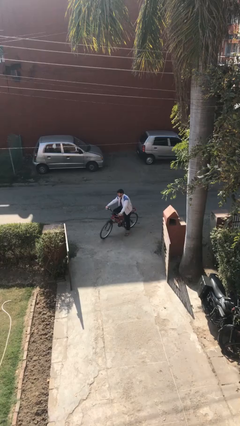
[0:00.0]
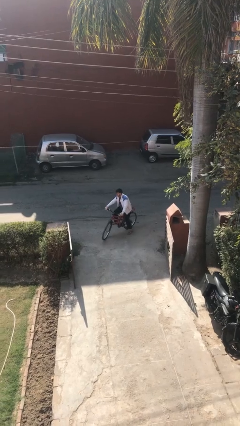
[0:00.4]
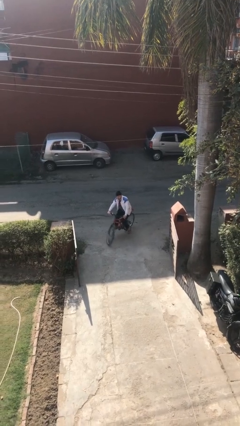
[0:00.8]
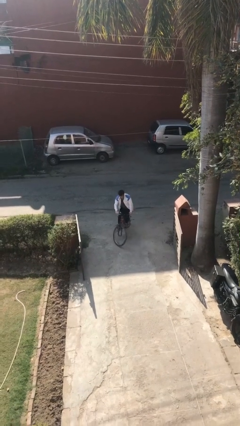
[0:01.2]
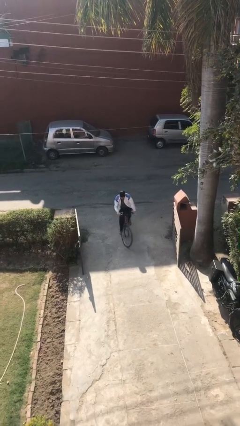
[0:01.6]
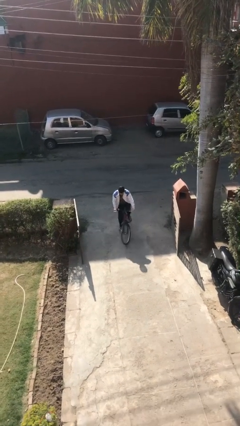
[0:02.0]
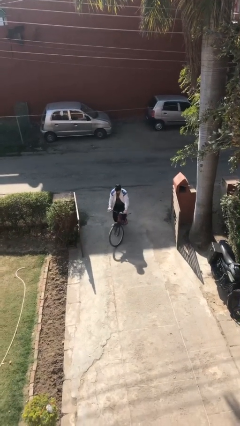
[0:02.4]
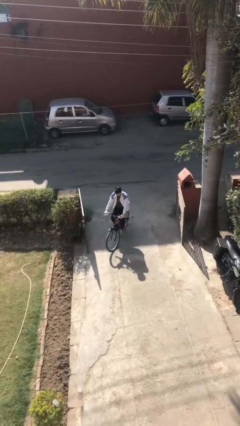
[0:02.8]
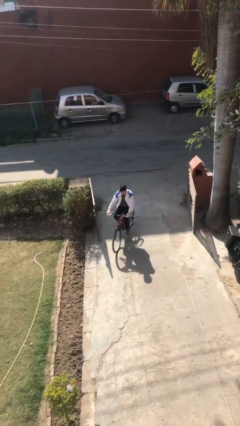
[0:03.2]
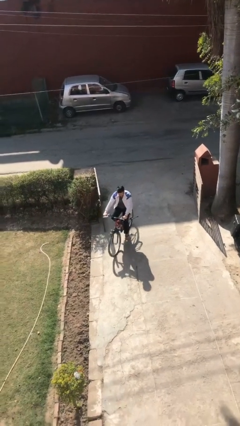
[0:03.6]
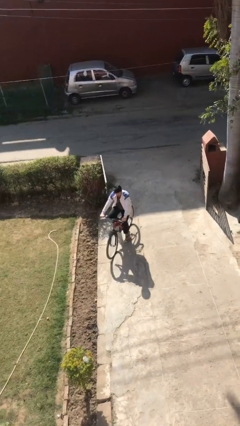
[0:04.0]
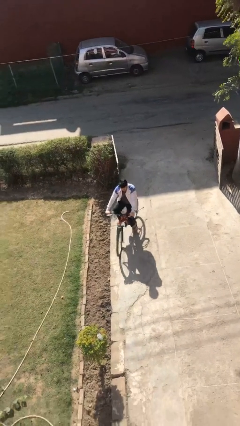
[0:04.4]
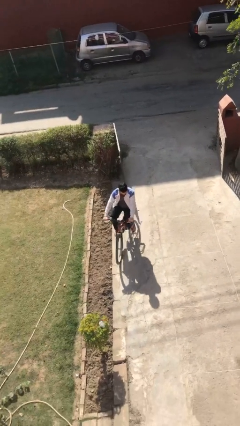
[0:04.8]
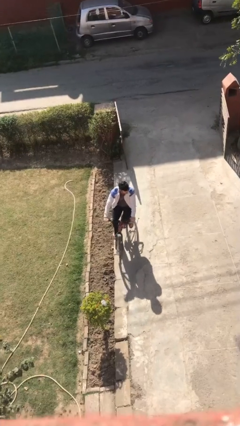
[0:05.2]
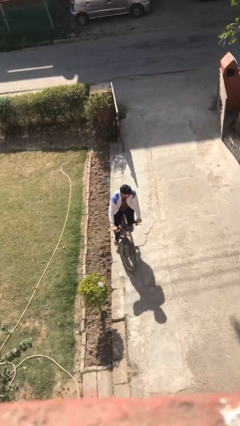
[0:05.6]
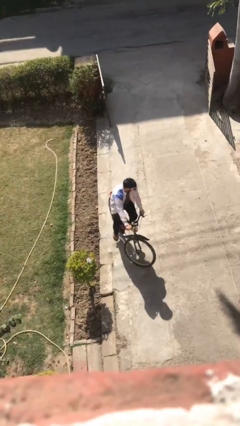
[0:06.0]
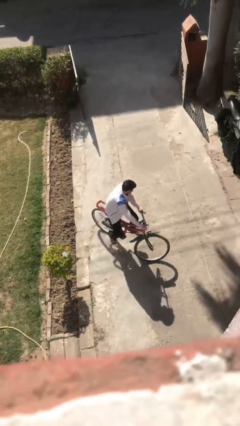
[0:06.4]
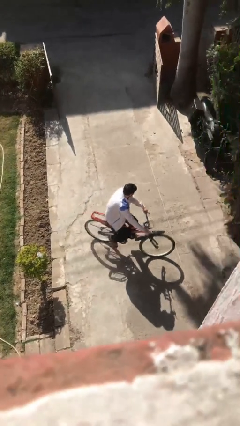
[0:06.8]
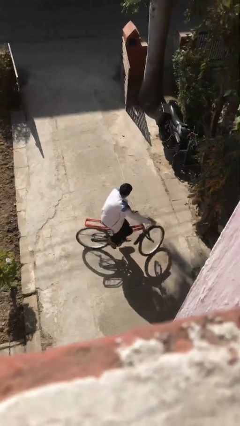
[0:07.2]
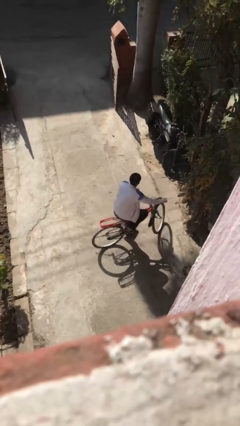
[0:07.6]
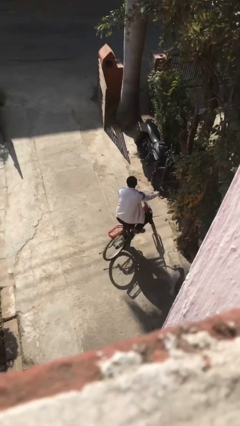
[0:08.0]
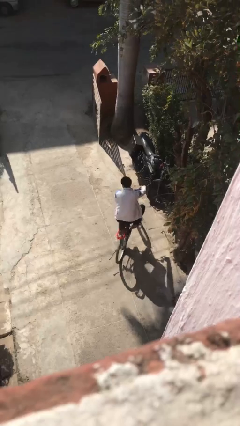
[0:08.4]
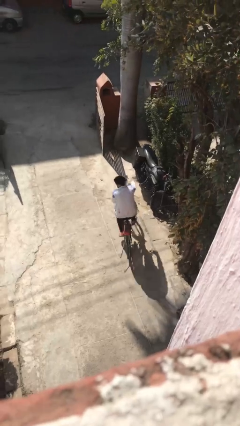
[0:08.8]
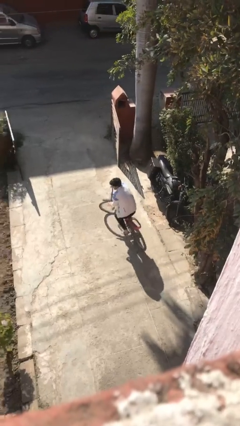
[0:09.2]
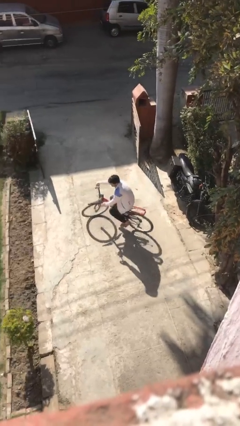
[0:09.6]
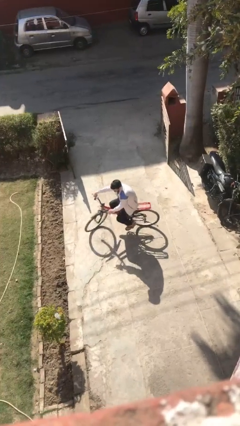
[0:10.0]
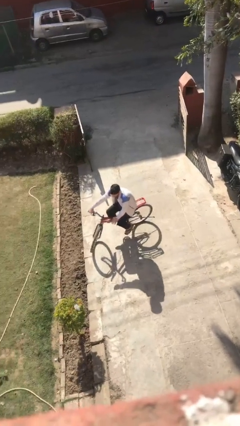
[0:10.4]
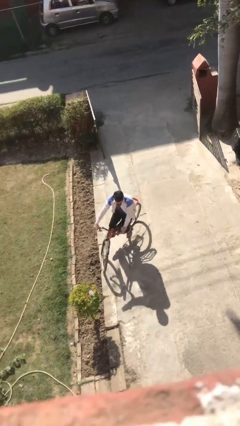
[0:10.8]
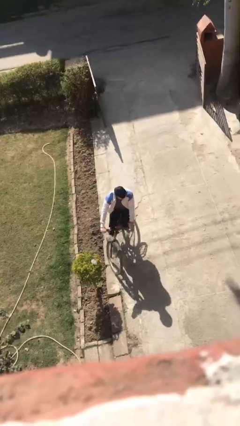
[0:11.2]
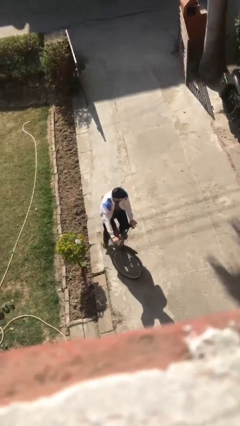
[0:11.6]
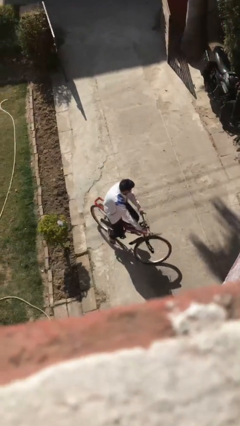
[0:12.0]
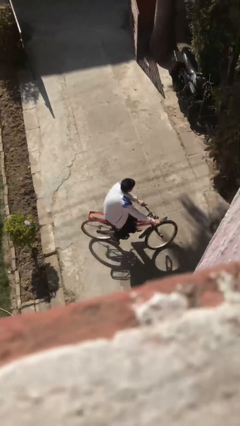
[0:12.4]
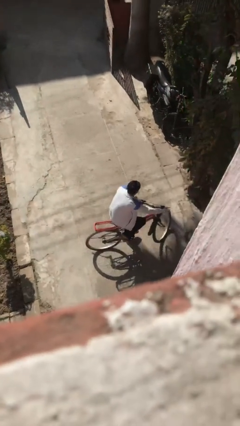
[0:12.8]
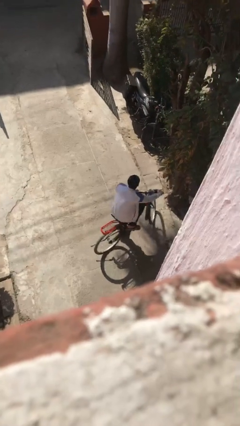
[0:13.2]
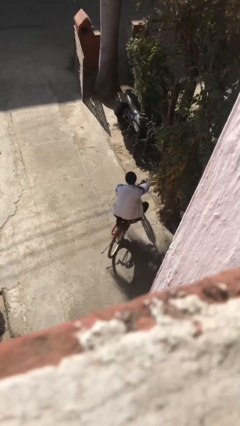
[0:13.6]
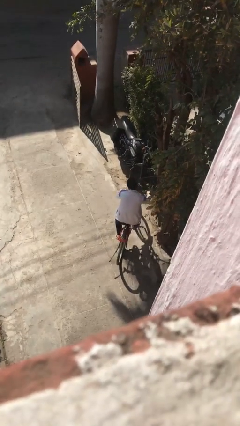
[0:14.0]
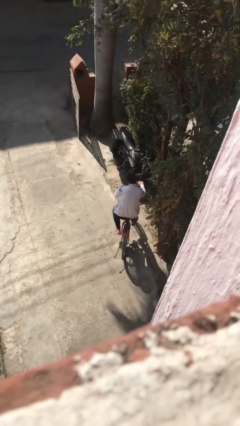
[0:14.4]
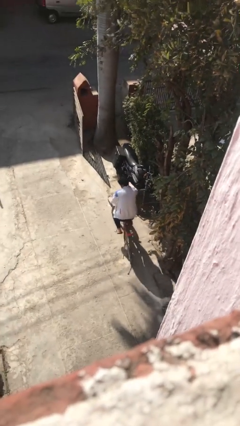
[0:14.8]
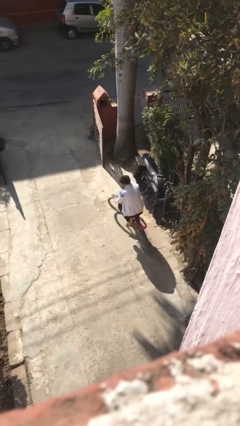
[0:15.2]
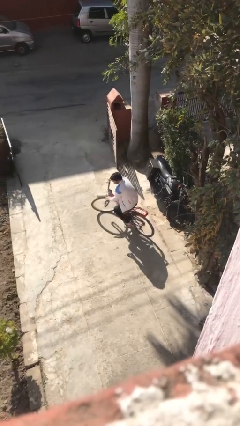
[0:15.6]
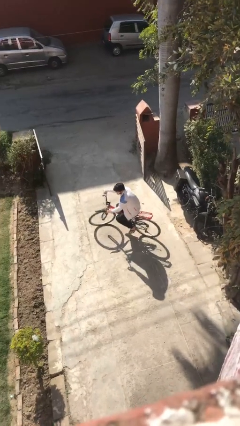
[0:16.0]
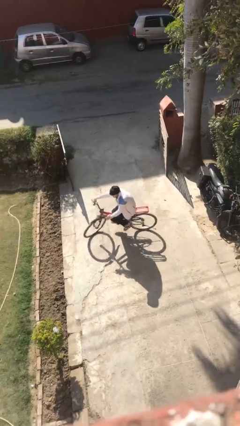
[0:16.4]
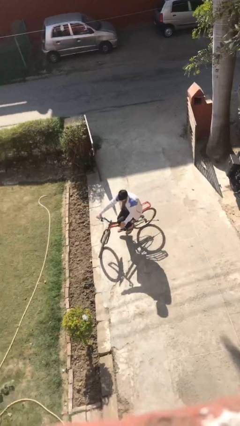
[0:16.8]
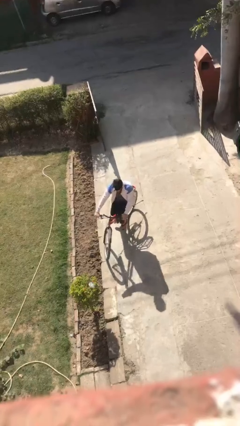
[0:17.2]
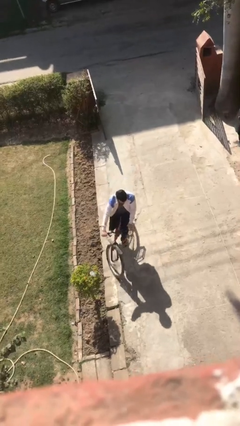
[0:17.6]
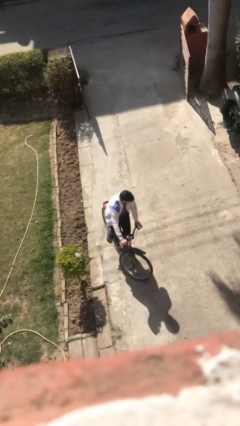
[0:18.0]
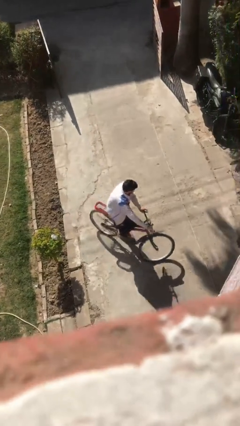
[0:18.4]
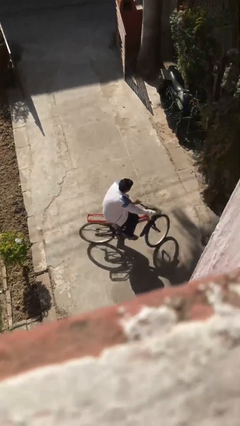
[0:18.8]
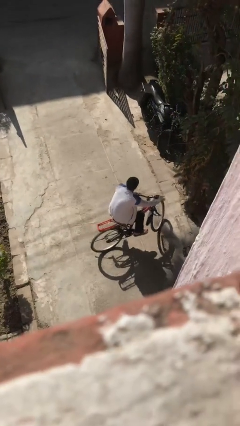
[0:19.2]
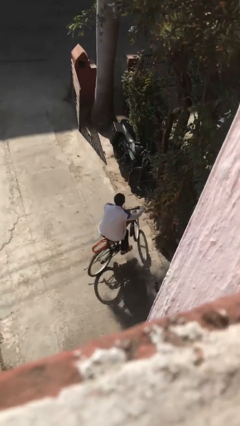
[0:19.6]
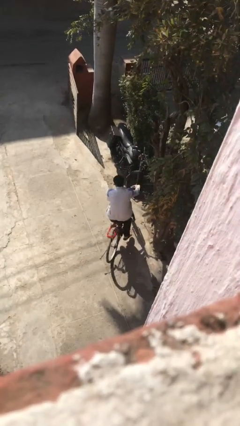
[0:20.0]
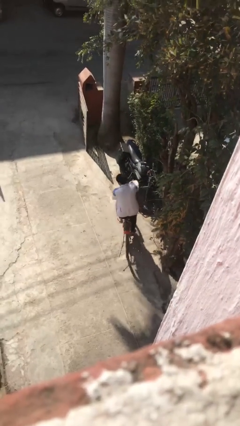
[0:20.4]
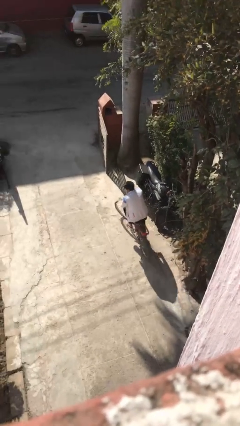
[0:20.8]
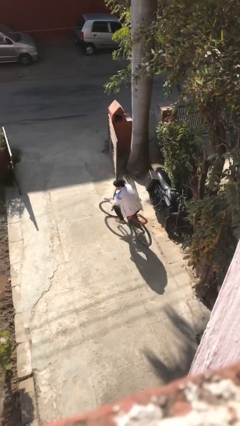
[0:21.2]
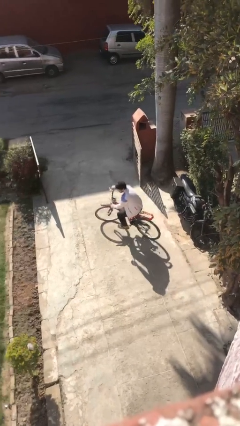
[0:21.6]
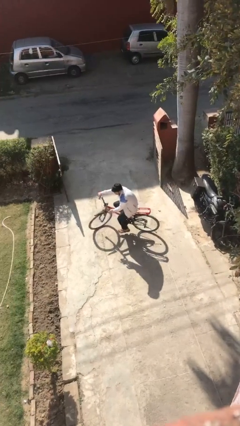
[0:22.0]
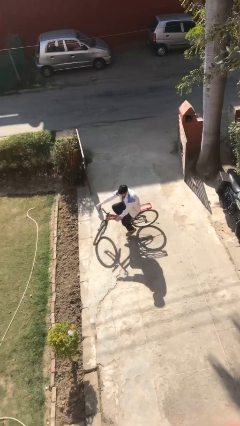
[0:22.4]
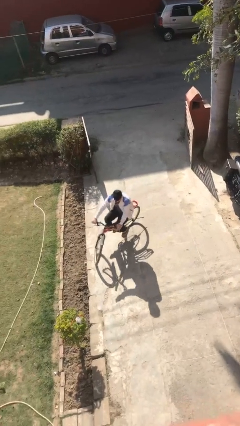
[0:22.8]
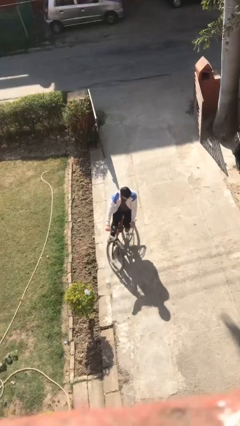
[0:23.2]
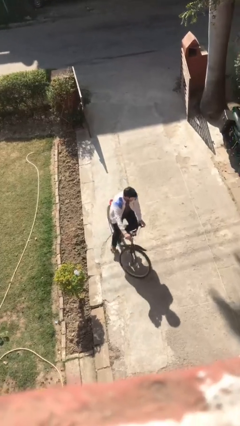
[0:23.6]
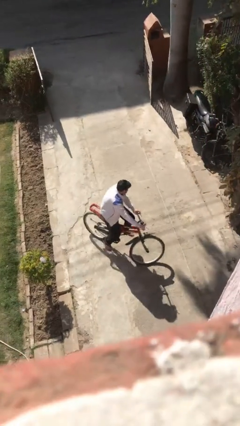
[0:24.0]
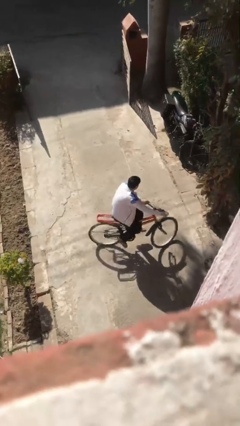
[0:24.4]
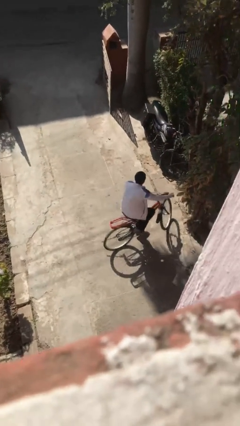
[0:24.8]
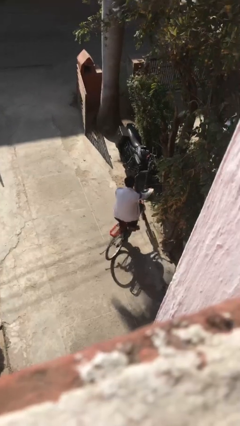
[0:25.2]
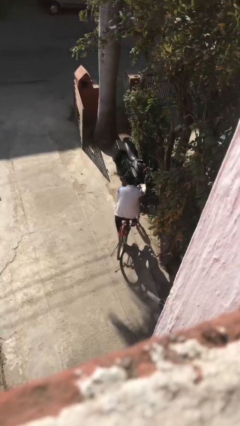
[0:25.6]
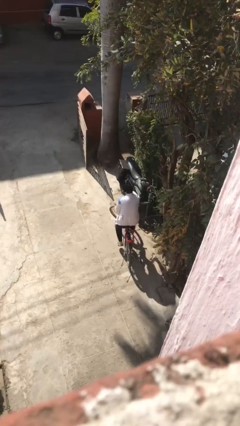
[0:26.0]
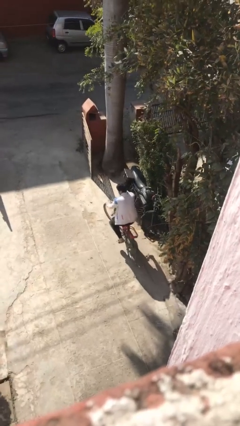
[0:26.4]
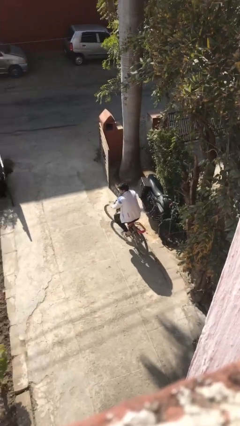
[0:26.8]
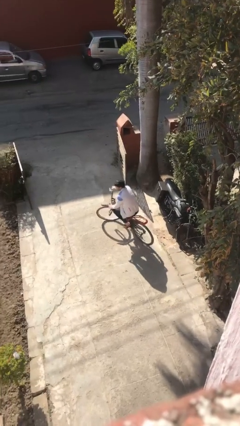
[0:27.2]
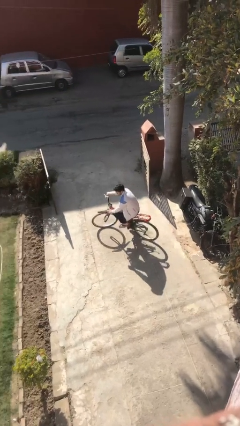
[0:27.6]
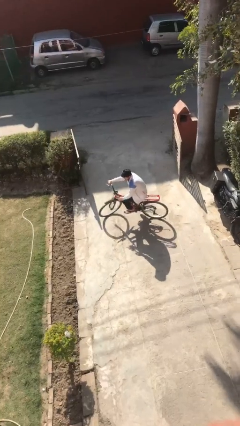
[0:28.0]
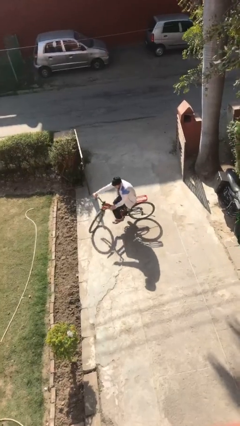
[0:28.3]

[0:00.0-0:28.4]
person rides bicycle

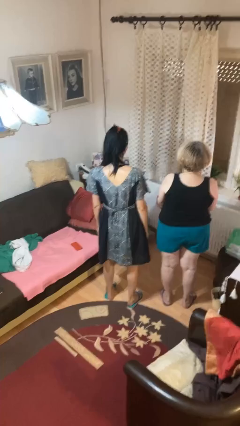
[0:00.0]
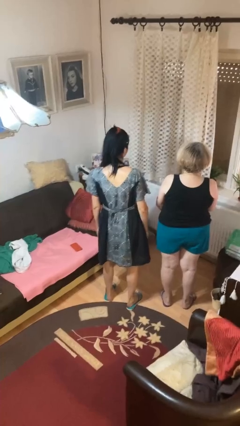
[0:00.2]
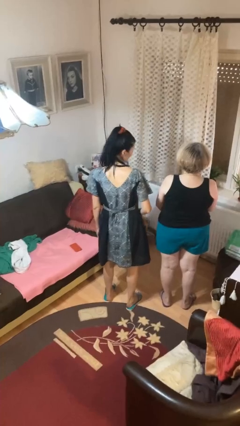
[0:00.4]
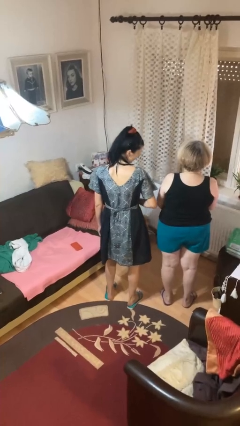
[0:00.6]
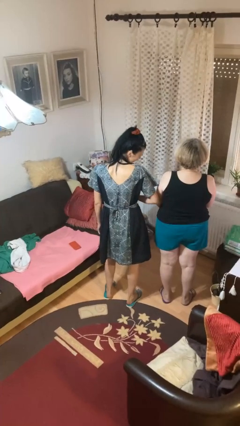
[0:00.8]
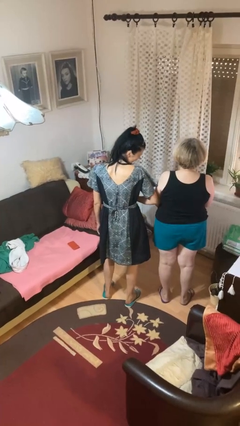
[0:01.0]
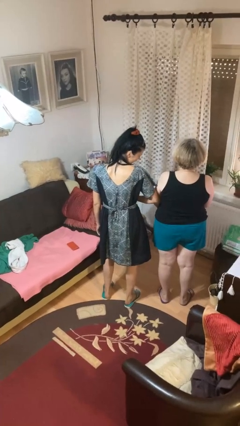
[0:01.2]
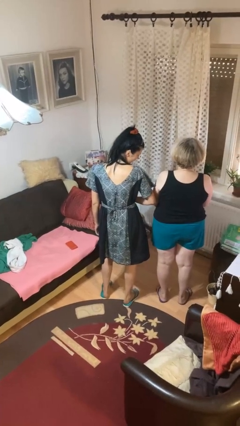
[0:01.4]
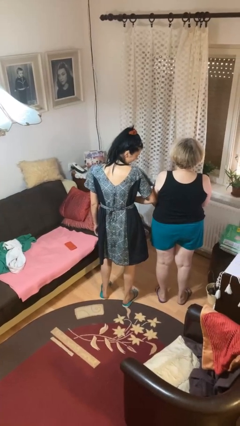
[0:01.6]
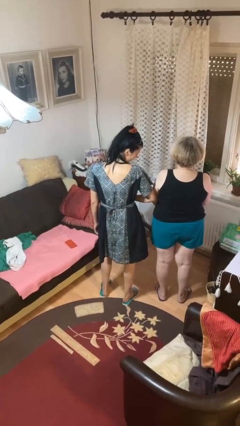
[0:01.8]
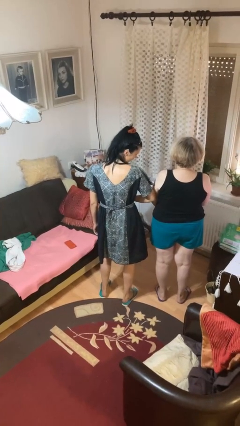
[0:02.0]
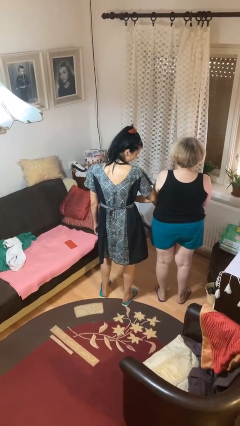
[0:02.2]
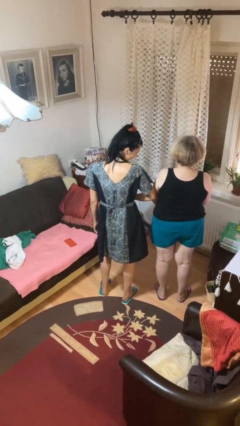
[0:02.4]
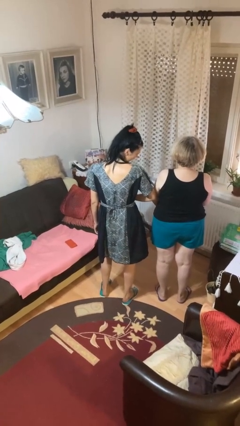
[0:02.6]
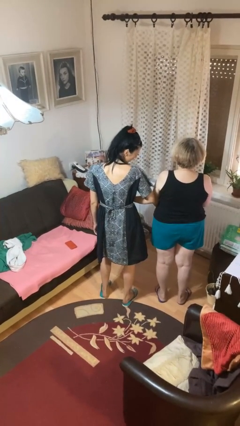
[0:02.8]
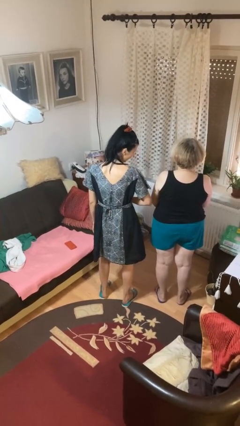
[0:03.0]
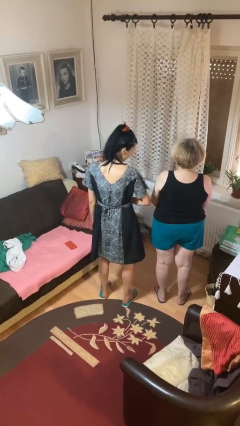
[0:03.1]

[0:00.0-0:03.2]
person nudges person with elbow

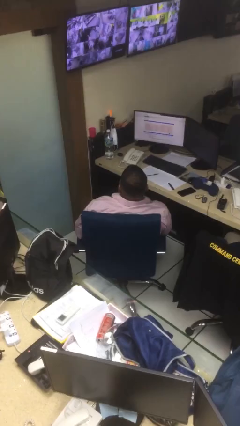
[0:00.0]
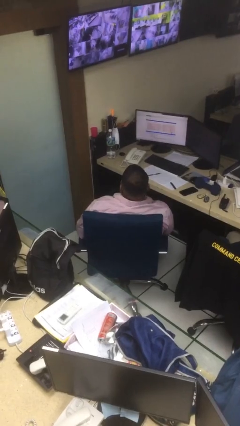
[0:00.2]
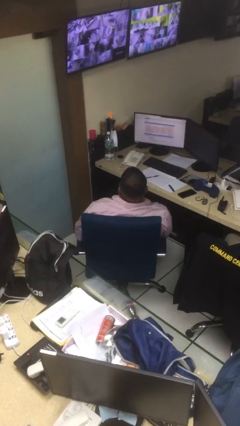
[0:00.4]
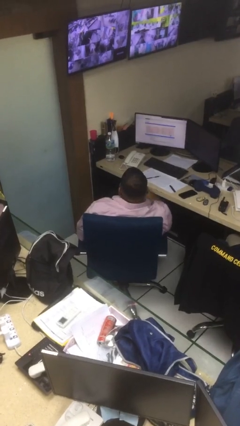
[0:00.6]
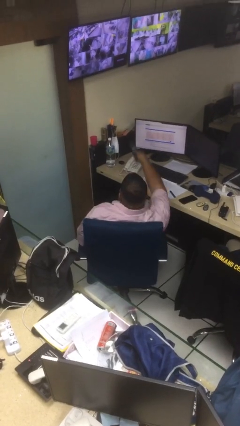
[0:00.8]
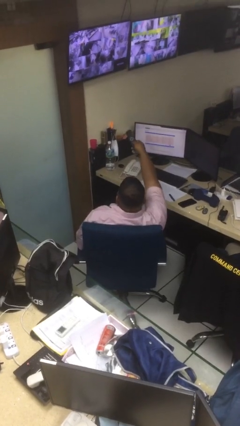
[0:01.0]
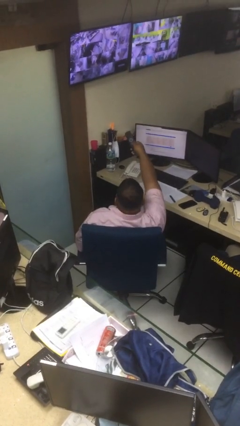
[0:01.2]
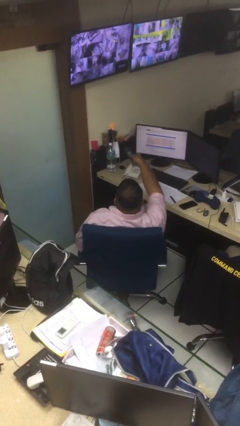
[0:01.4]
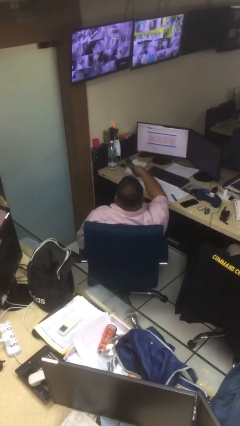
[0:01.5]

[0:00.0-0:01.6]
person uses television remote
